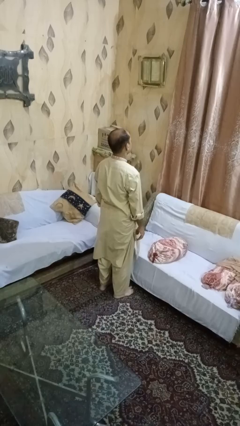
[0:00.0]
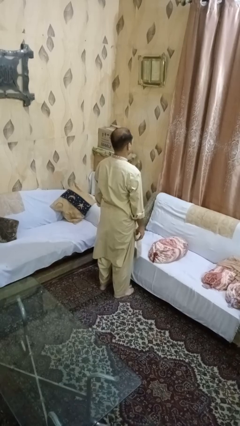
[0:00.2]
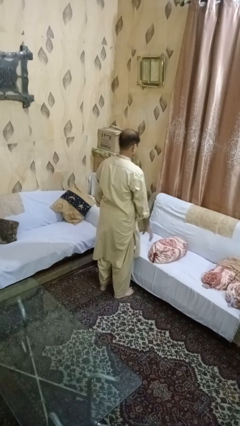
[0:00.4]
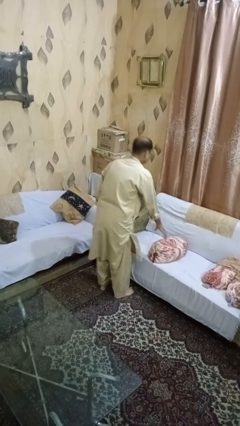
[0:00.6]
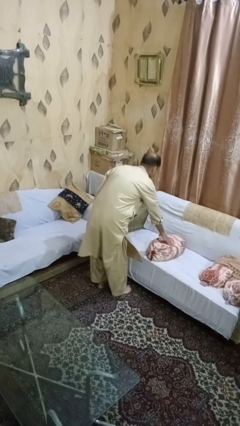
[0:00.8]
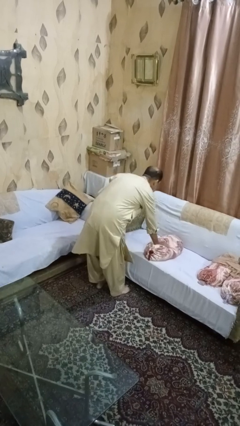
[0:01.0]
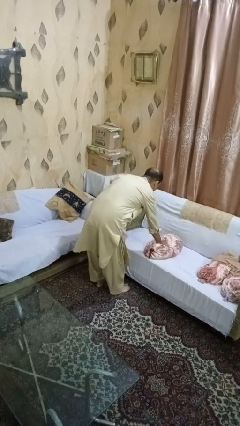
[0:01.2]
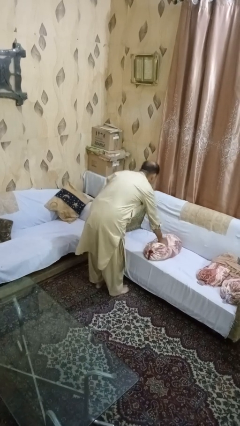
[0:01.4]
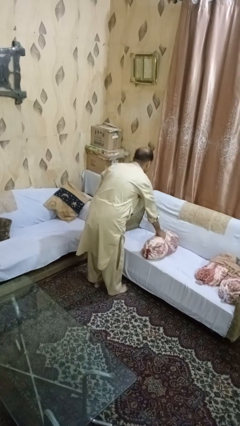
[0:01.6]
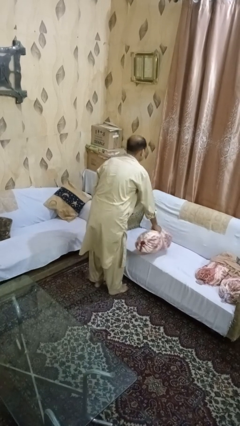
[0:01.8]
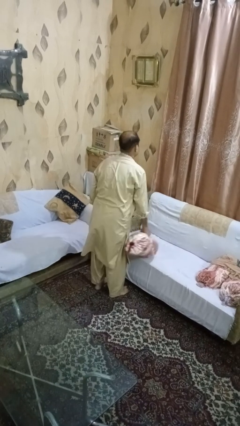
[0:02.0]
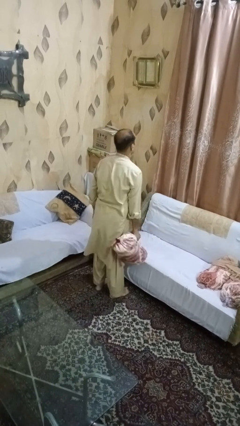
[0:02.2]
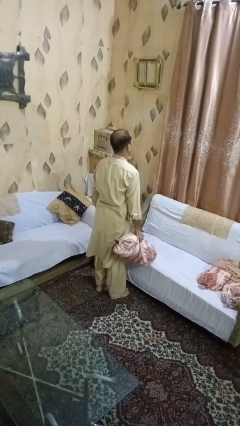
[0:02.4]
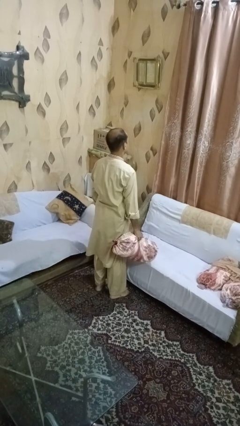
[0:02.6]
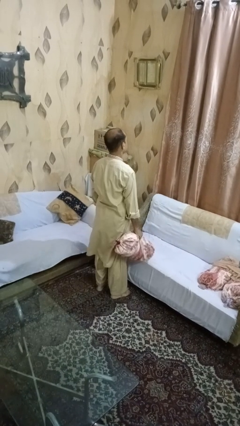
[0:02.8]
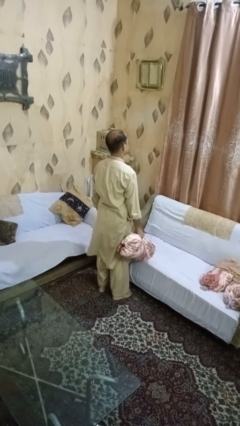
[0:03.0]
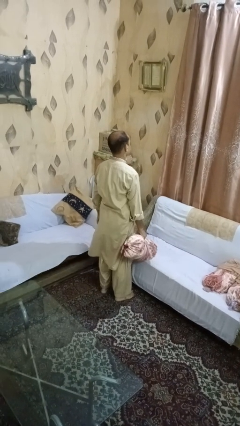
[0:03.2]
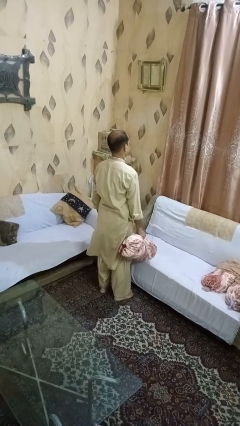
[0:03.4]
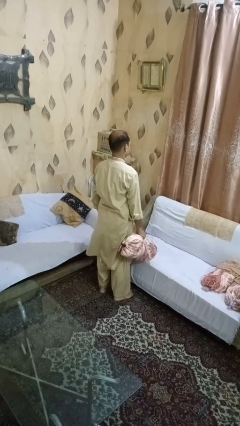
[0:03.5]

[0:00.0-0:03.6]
person picks up object from couch

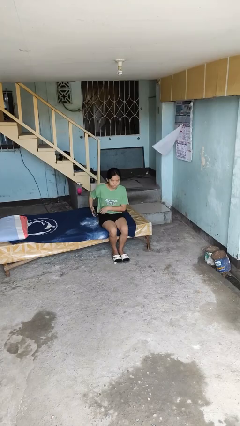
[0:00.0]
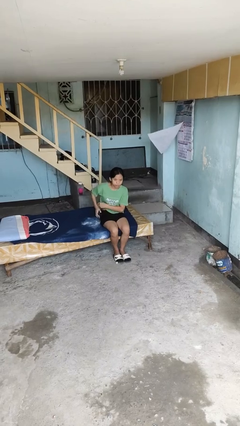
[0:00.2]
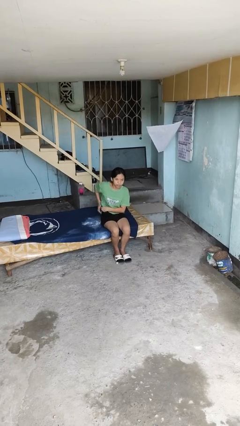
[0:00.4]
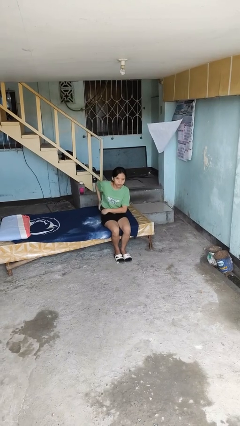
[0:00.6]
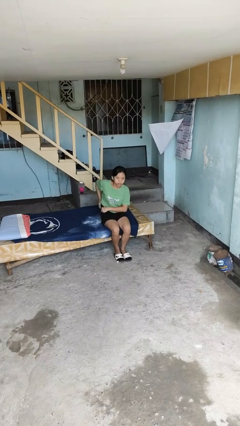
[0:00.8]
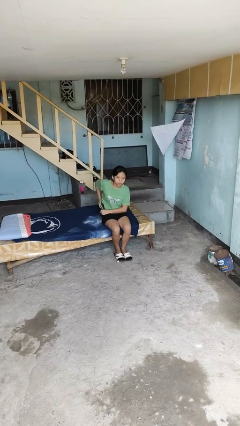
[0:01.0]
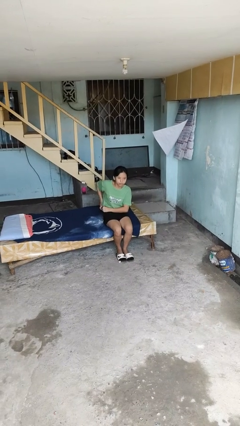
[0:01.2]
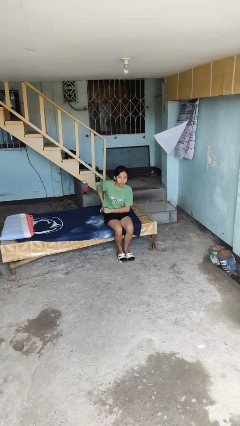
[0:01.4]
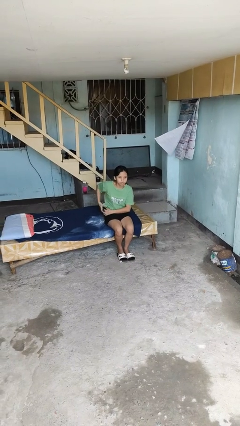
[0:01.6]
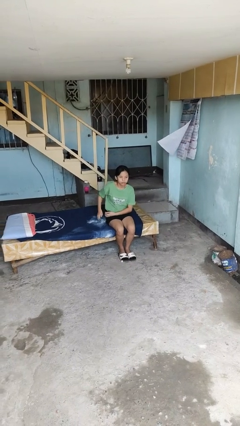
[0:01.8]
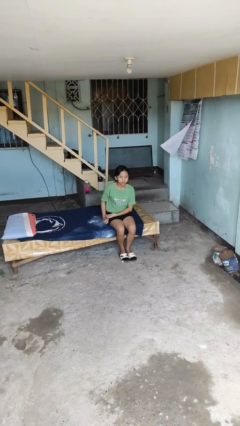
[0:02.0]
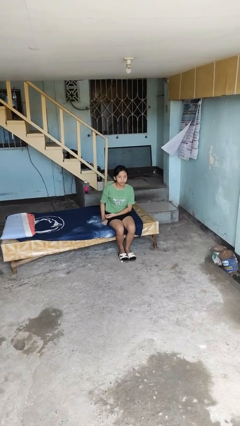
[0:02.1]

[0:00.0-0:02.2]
person puts phone into pocket

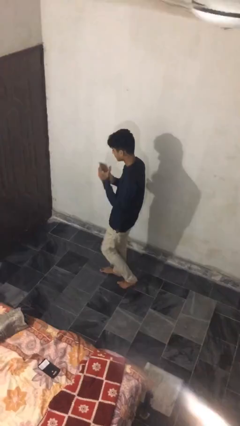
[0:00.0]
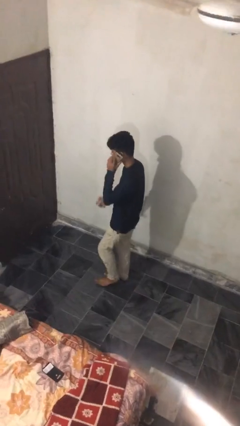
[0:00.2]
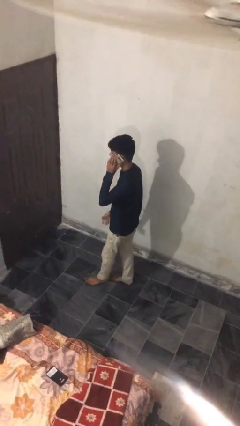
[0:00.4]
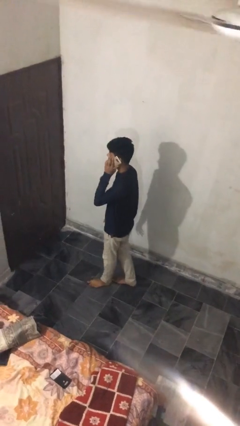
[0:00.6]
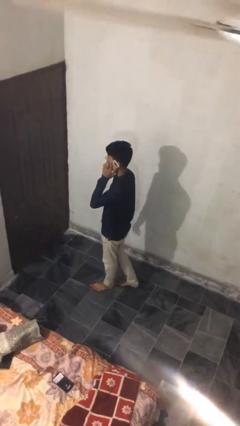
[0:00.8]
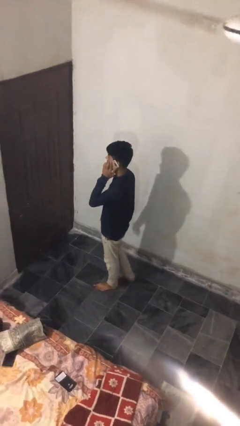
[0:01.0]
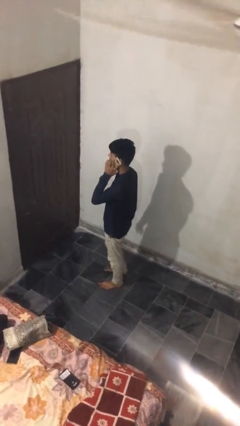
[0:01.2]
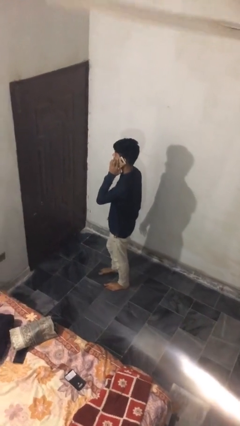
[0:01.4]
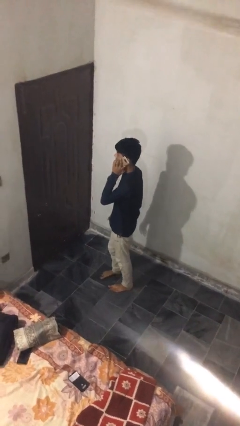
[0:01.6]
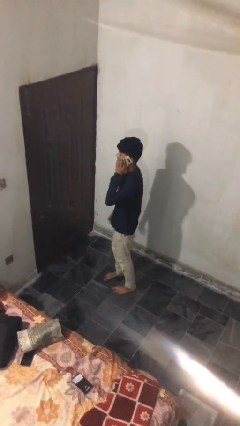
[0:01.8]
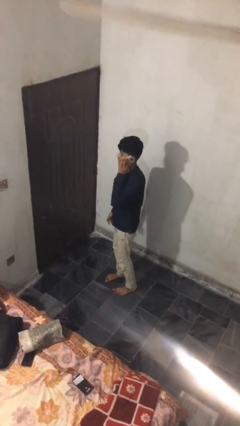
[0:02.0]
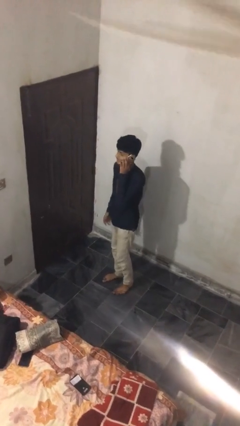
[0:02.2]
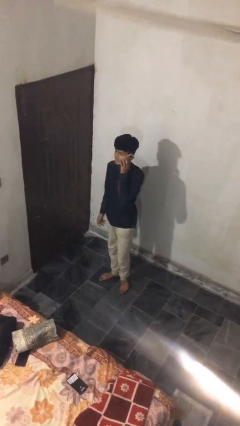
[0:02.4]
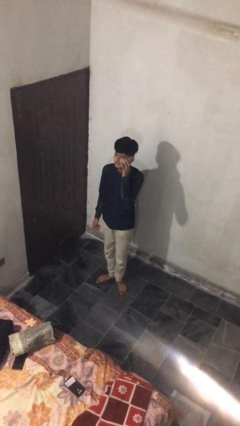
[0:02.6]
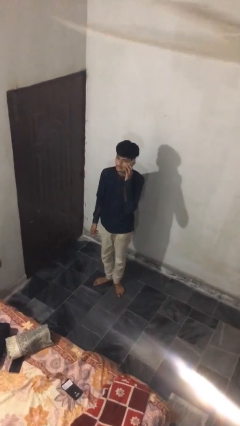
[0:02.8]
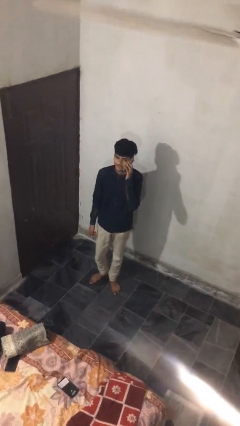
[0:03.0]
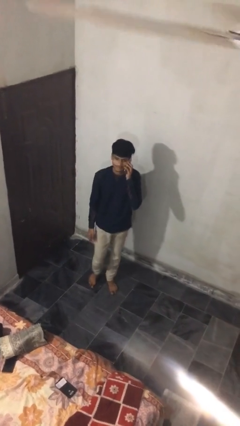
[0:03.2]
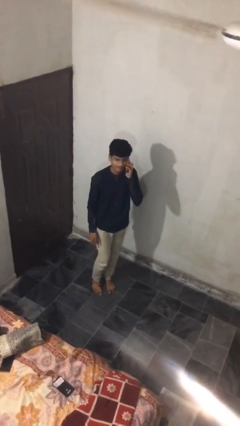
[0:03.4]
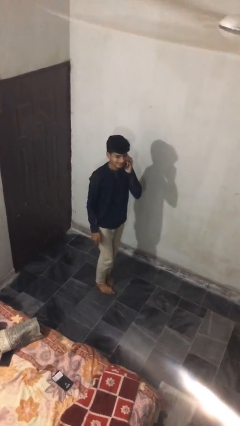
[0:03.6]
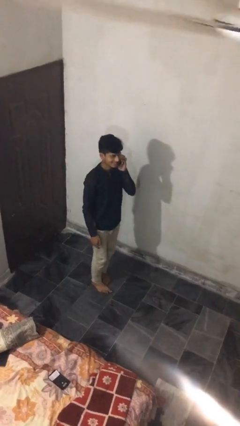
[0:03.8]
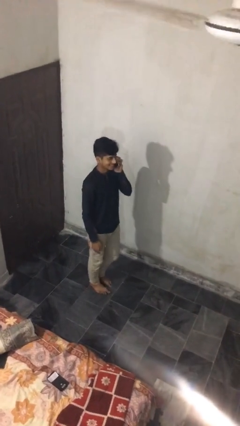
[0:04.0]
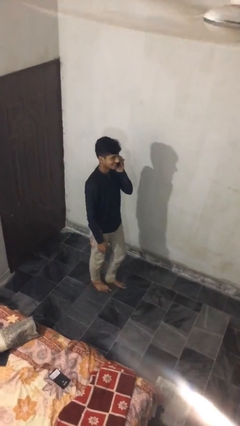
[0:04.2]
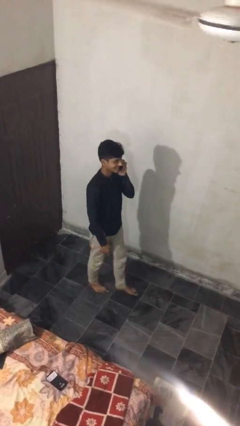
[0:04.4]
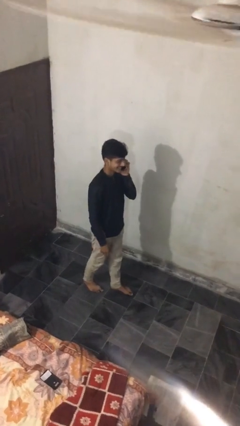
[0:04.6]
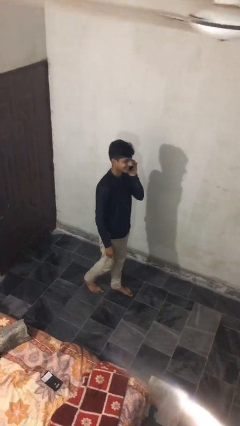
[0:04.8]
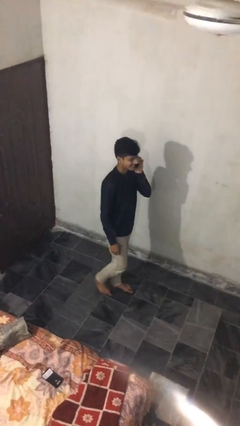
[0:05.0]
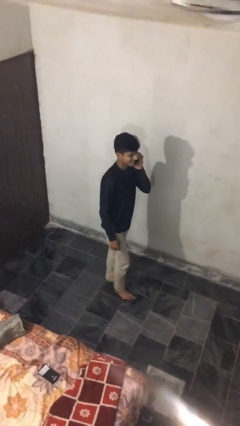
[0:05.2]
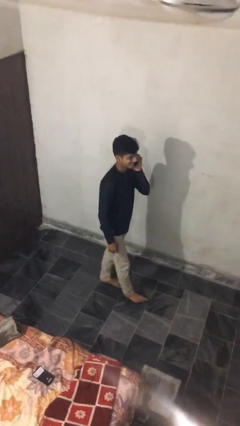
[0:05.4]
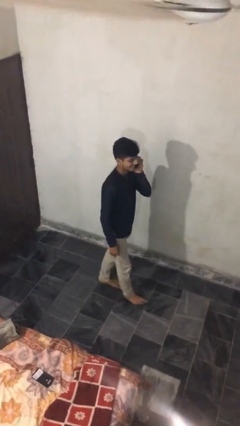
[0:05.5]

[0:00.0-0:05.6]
person talks on phone

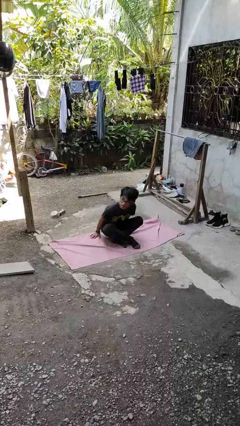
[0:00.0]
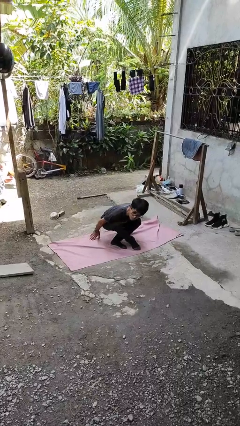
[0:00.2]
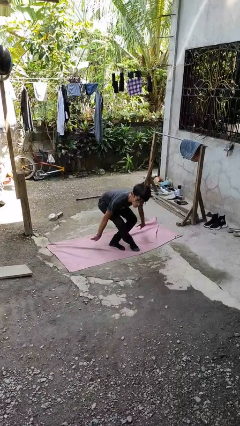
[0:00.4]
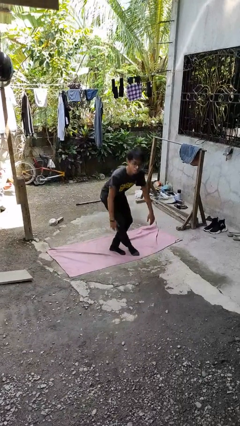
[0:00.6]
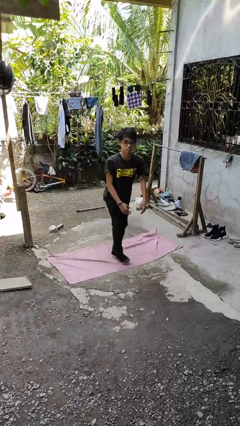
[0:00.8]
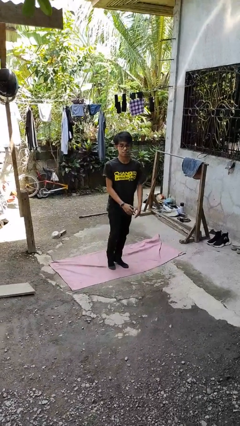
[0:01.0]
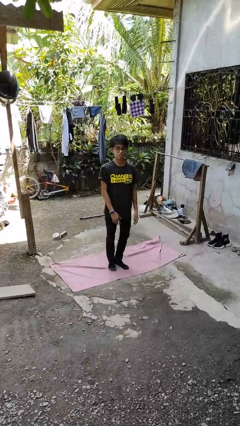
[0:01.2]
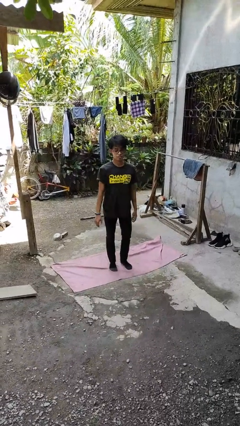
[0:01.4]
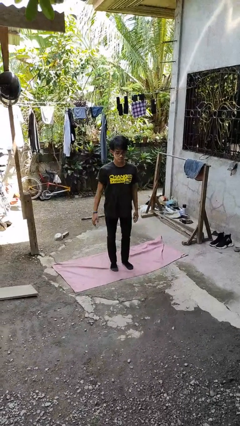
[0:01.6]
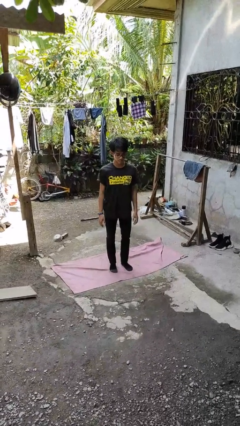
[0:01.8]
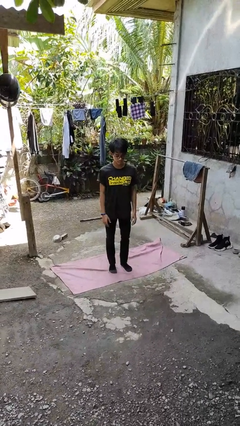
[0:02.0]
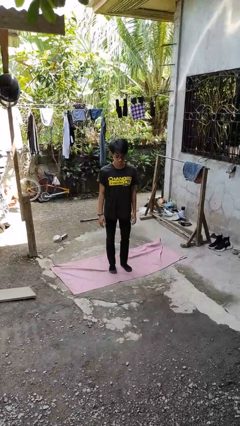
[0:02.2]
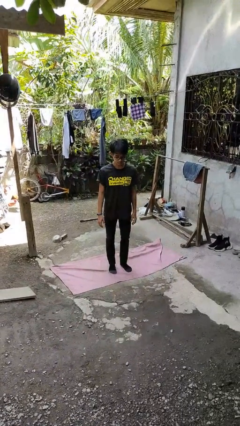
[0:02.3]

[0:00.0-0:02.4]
person stands up from floor

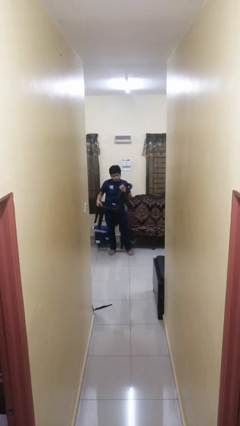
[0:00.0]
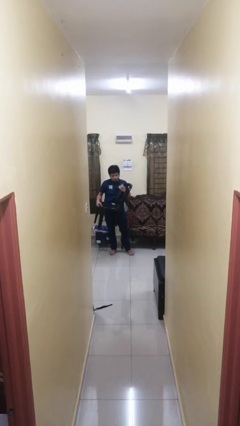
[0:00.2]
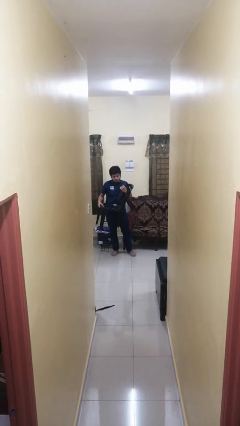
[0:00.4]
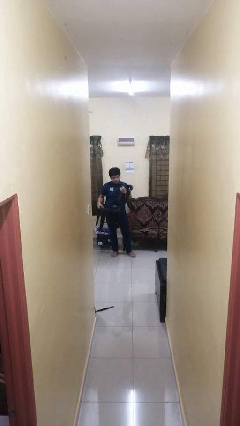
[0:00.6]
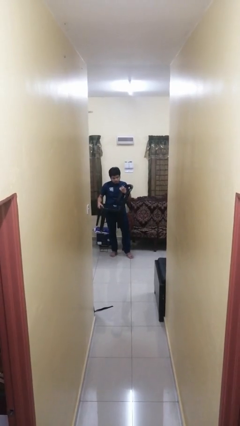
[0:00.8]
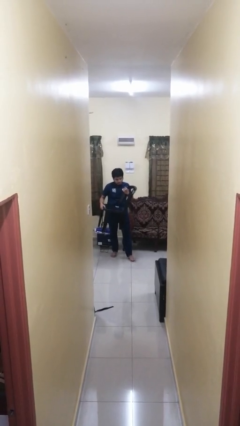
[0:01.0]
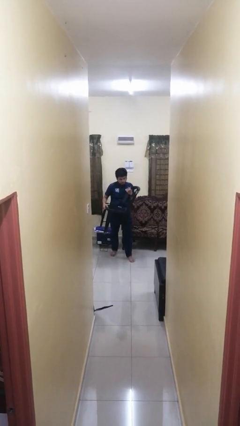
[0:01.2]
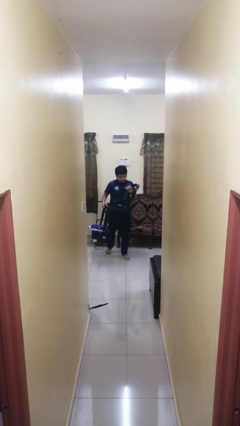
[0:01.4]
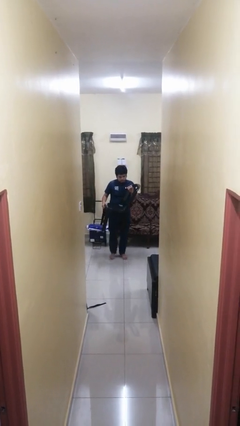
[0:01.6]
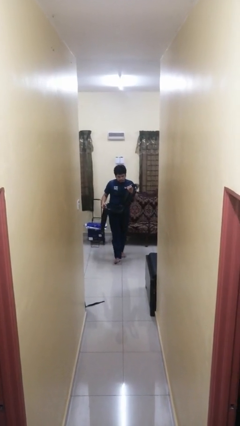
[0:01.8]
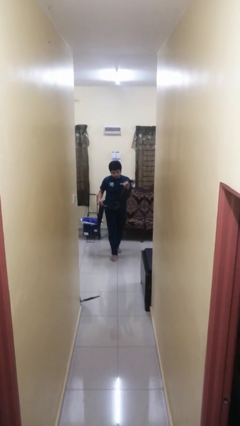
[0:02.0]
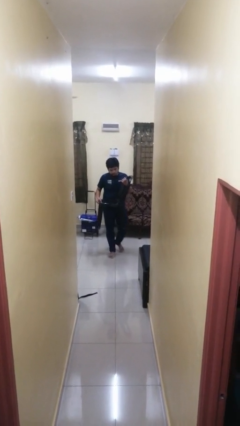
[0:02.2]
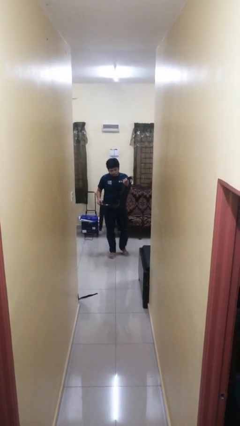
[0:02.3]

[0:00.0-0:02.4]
person carries furniture

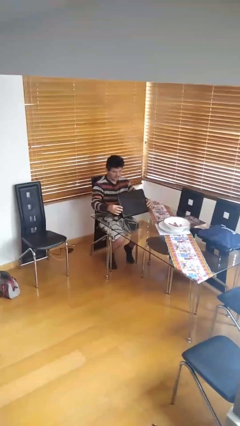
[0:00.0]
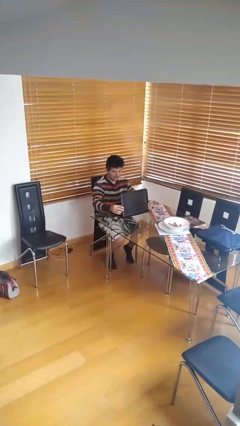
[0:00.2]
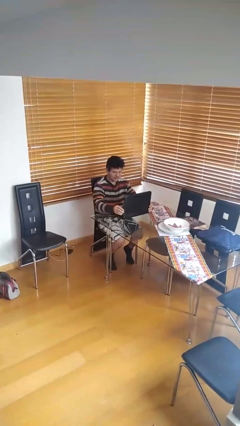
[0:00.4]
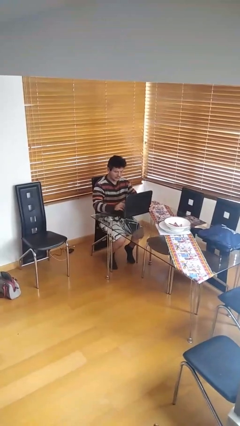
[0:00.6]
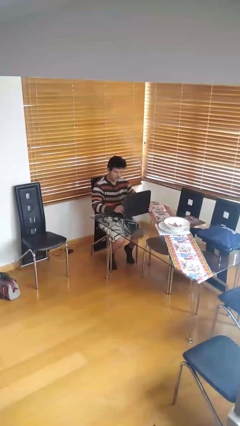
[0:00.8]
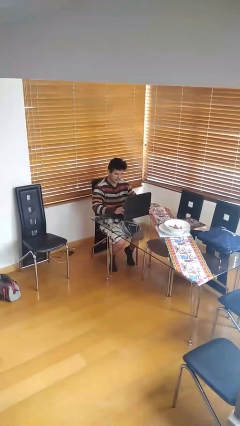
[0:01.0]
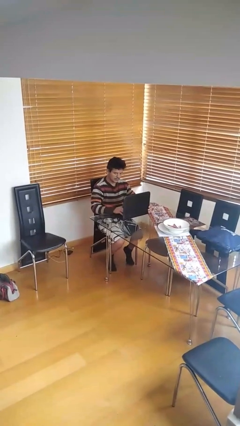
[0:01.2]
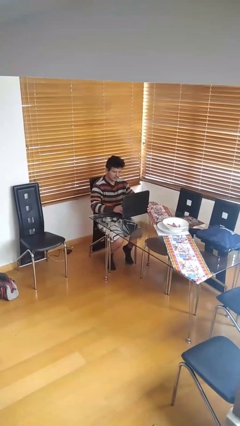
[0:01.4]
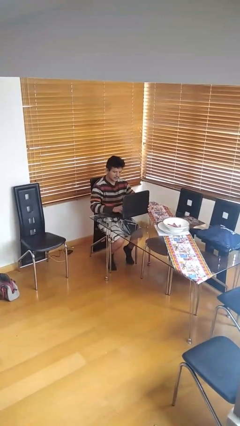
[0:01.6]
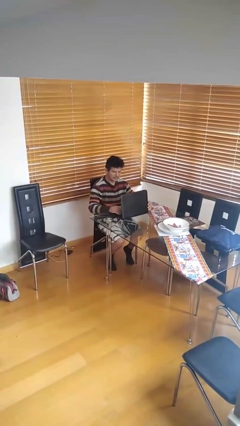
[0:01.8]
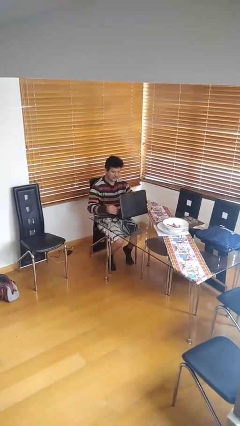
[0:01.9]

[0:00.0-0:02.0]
person interacts with laptop
